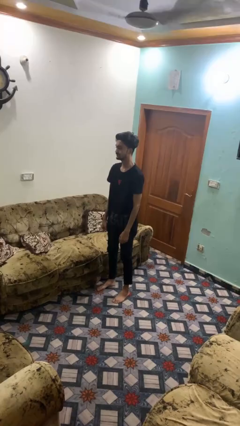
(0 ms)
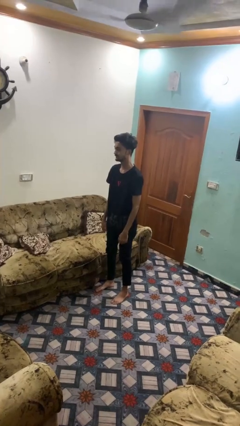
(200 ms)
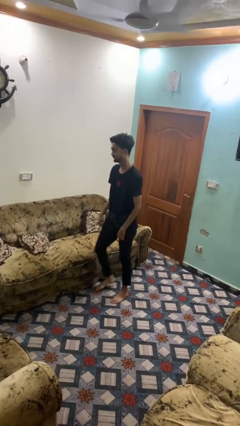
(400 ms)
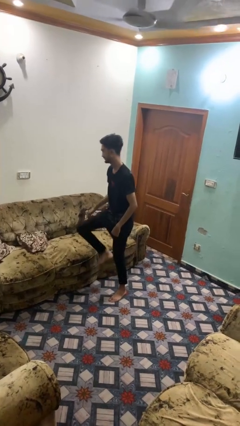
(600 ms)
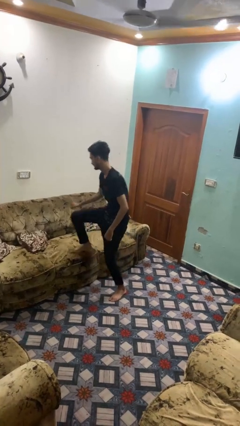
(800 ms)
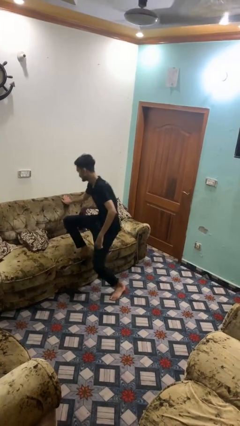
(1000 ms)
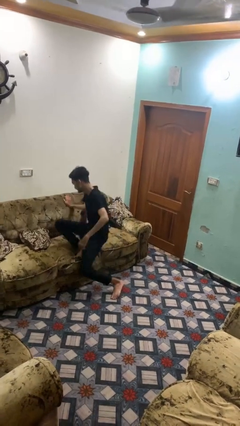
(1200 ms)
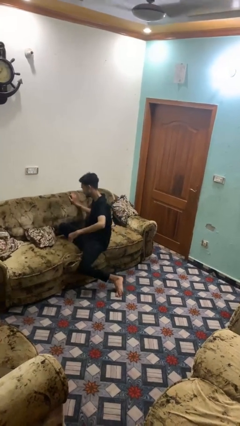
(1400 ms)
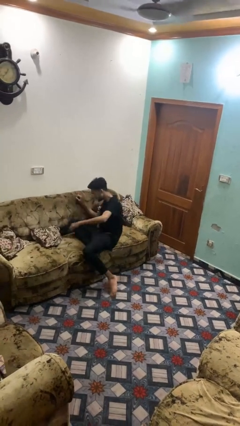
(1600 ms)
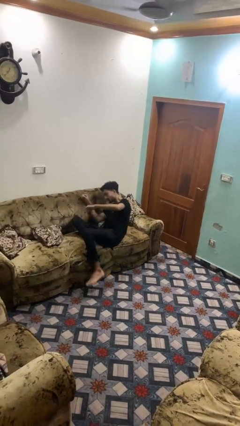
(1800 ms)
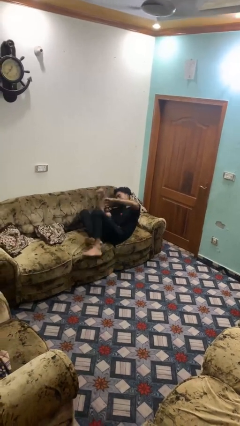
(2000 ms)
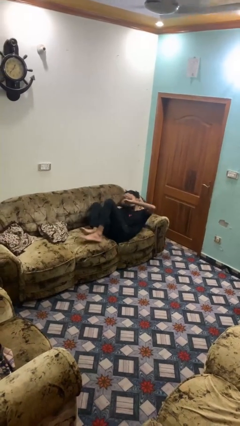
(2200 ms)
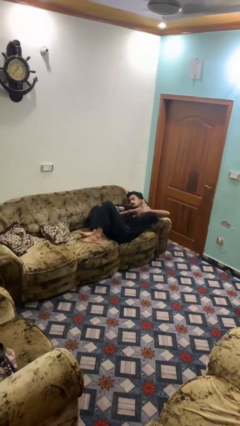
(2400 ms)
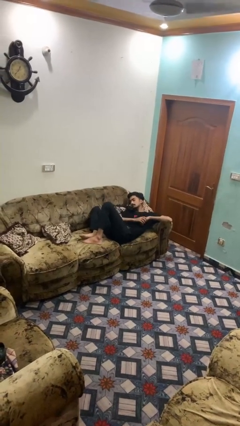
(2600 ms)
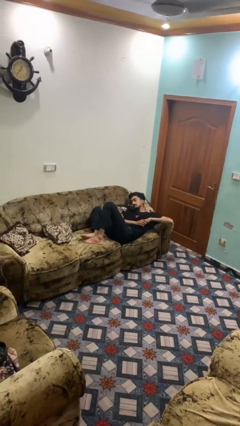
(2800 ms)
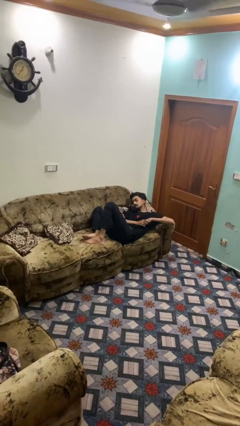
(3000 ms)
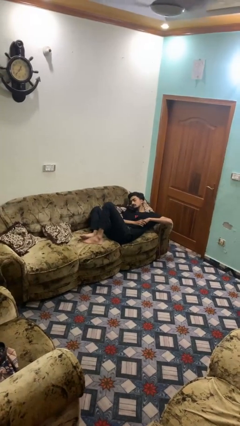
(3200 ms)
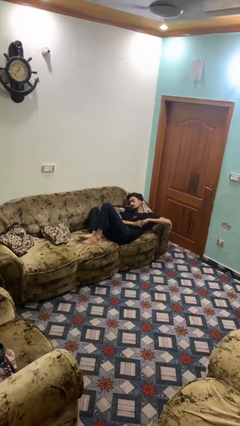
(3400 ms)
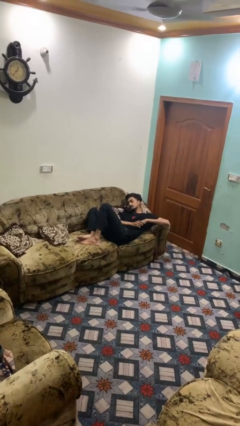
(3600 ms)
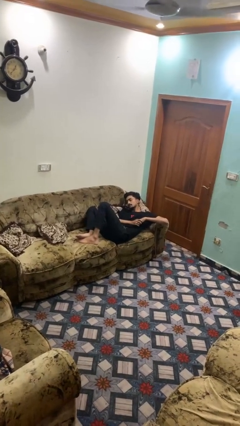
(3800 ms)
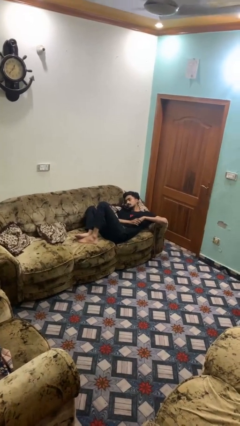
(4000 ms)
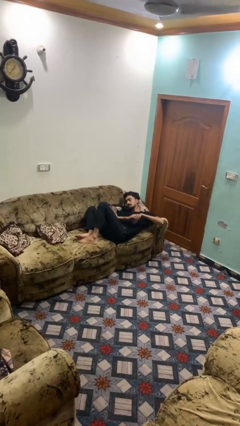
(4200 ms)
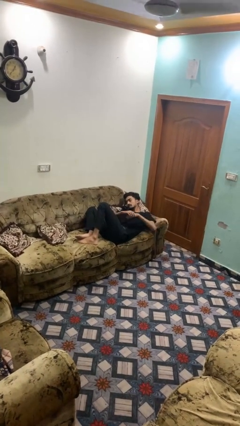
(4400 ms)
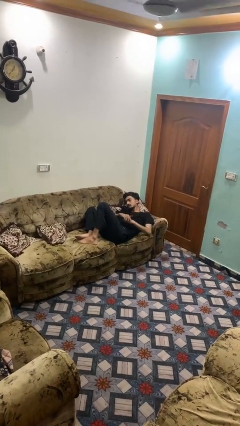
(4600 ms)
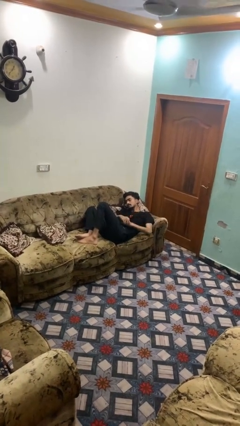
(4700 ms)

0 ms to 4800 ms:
person lies down on couch

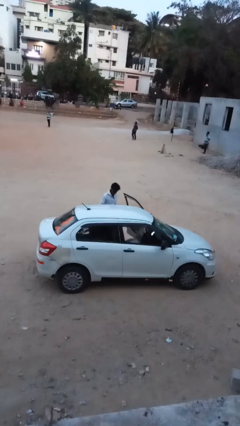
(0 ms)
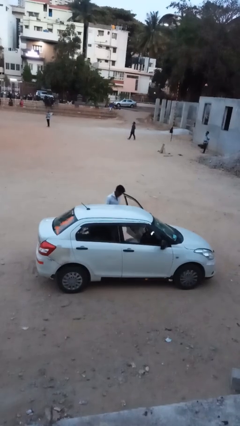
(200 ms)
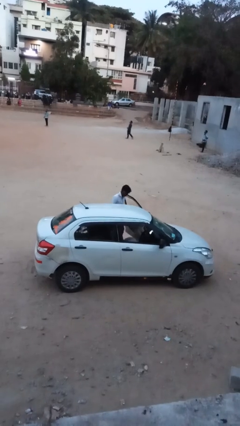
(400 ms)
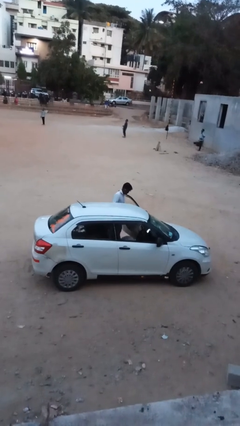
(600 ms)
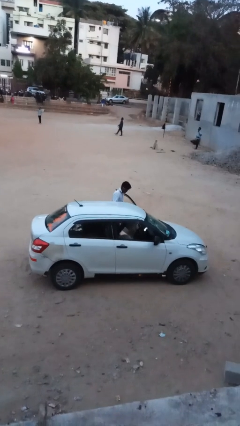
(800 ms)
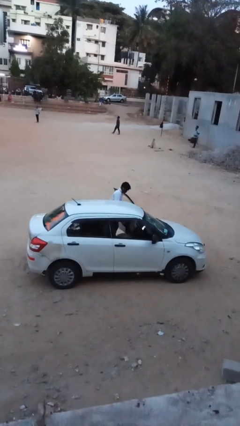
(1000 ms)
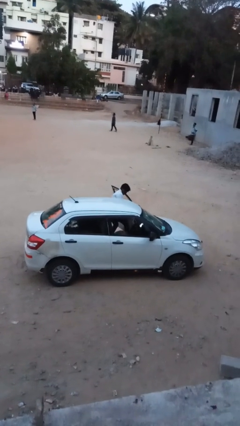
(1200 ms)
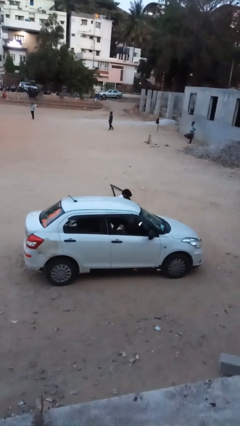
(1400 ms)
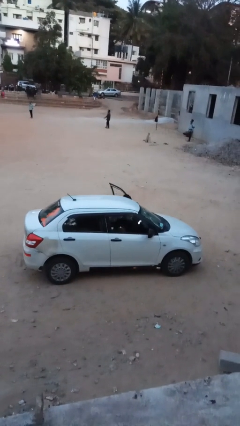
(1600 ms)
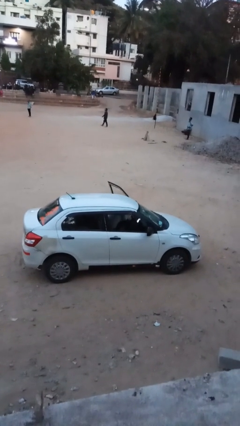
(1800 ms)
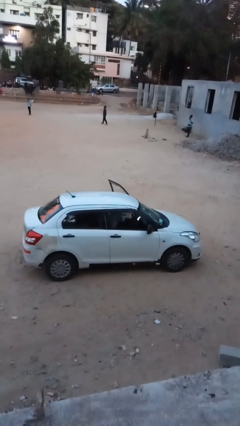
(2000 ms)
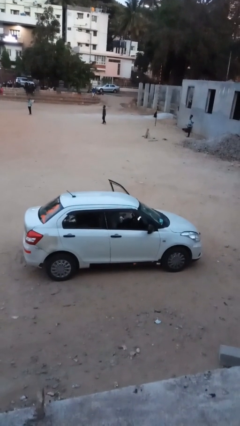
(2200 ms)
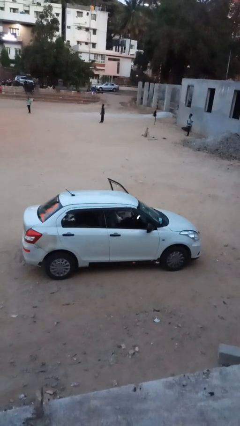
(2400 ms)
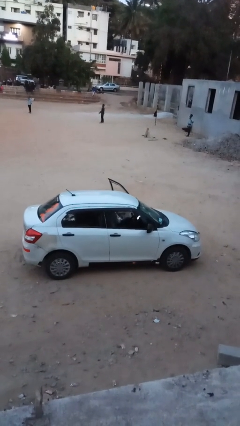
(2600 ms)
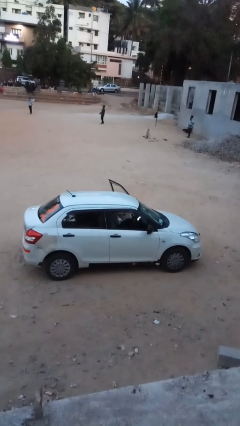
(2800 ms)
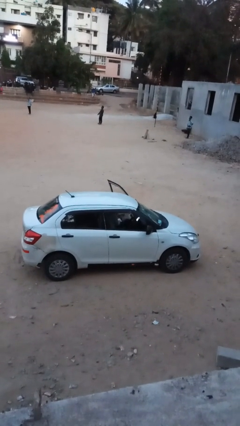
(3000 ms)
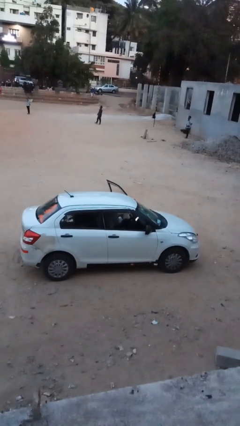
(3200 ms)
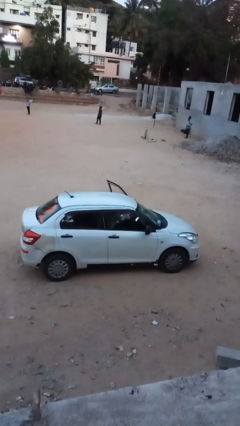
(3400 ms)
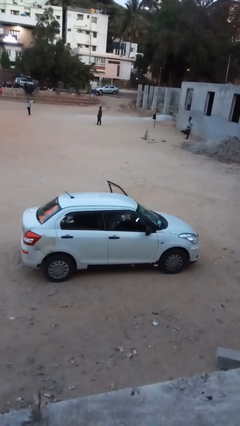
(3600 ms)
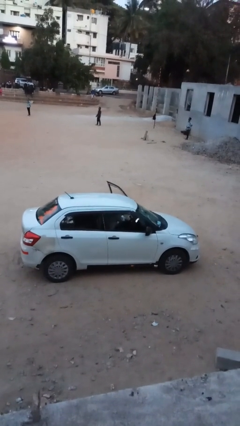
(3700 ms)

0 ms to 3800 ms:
person enters car

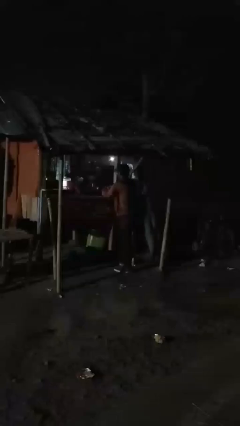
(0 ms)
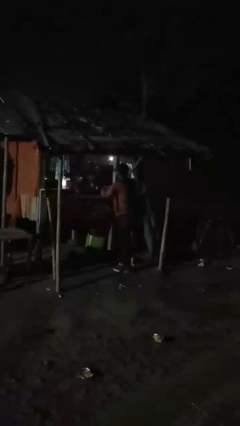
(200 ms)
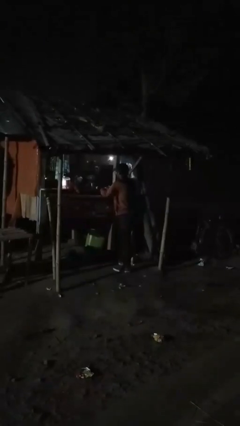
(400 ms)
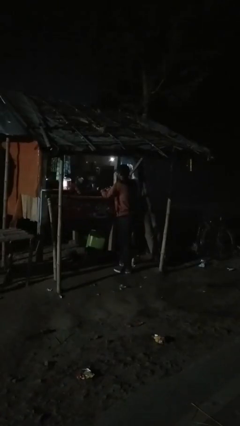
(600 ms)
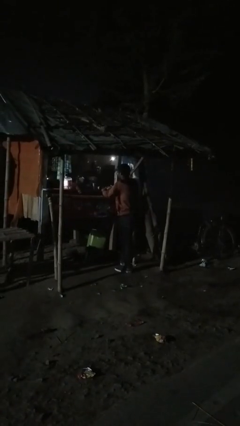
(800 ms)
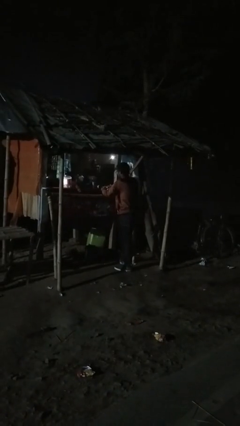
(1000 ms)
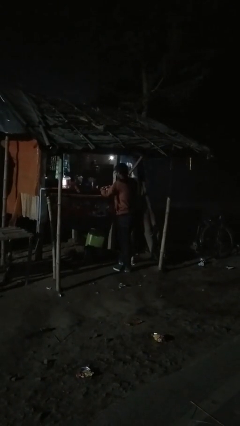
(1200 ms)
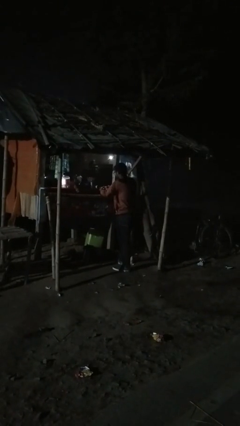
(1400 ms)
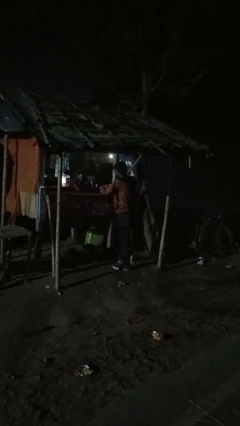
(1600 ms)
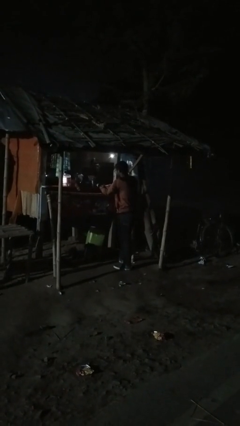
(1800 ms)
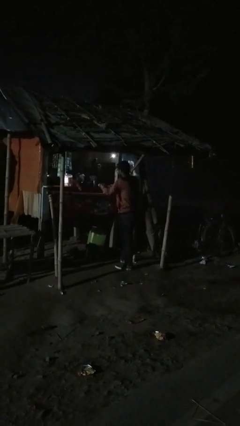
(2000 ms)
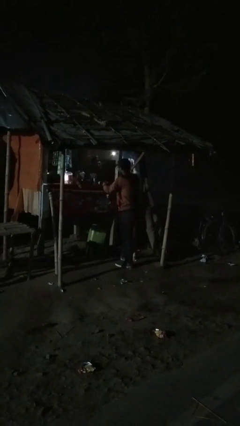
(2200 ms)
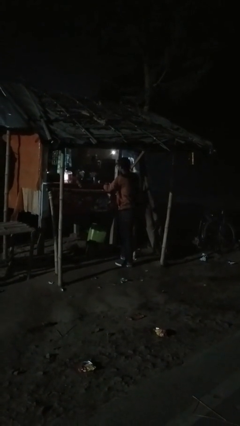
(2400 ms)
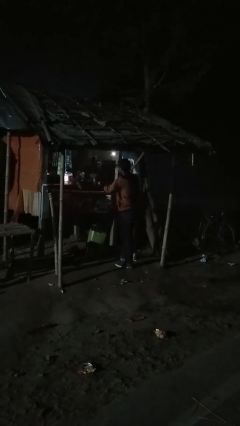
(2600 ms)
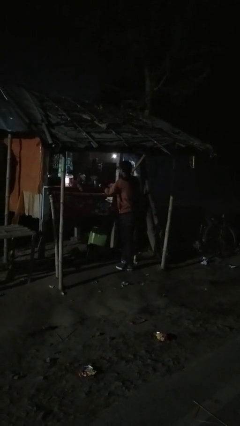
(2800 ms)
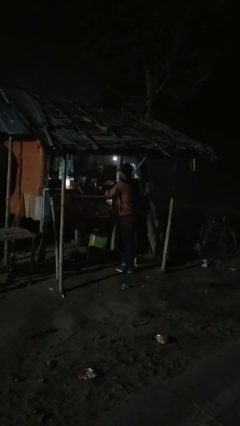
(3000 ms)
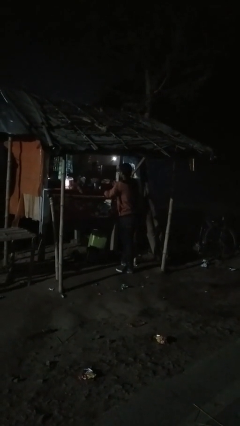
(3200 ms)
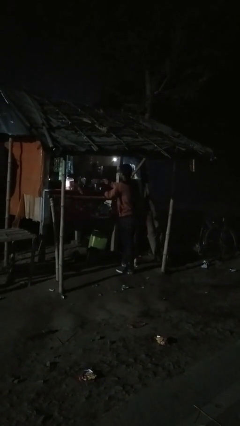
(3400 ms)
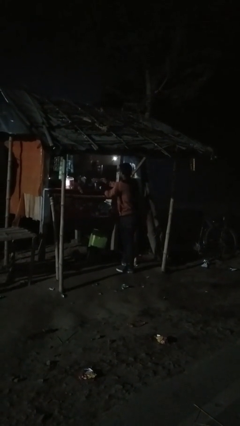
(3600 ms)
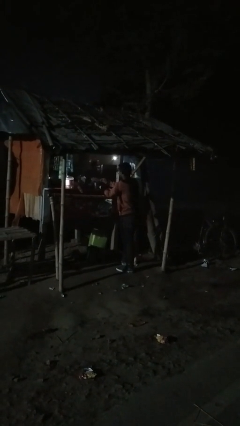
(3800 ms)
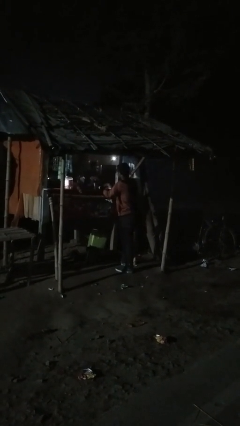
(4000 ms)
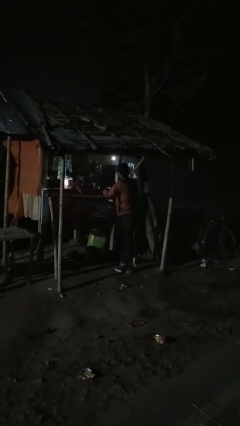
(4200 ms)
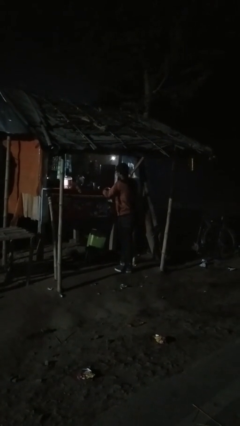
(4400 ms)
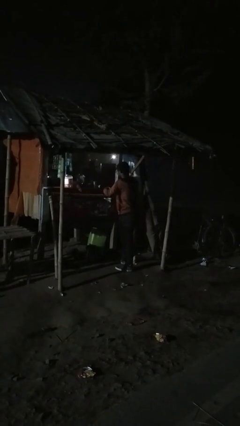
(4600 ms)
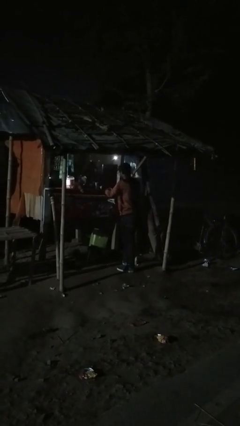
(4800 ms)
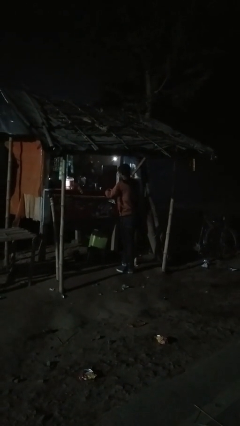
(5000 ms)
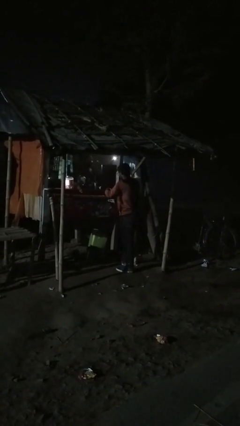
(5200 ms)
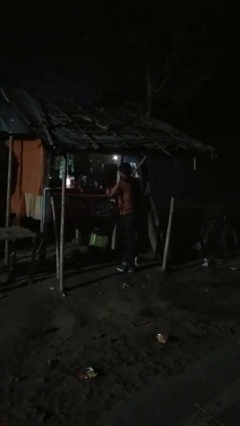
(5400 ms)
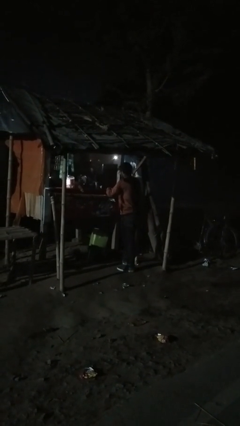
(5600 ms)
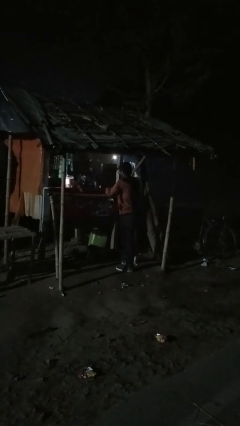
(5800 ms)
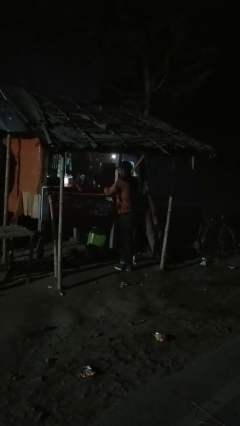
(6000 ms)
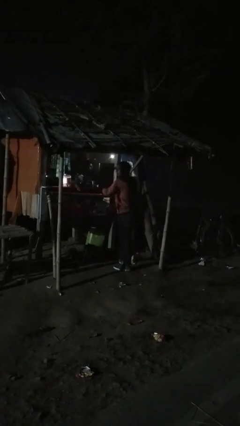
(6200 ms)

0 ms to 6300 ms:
person purchases from machine

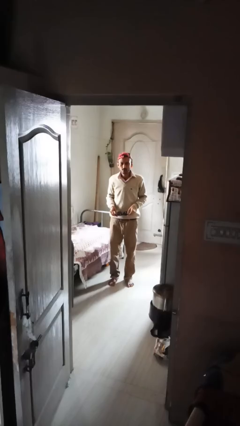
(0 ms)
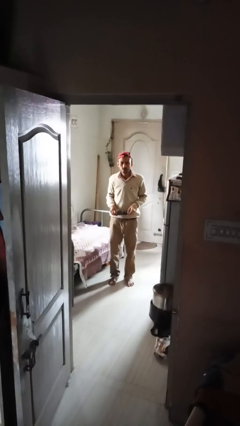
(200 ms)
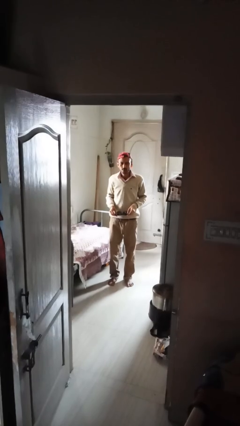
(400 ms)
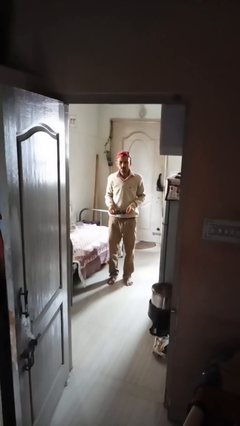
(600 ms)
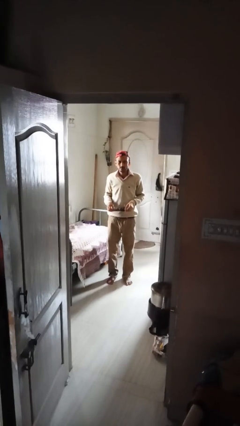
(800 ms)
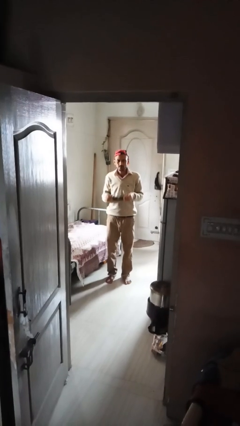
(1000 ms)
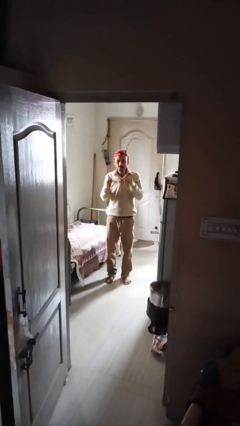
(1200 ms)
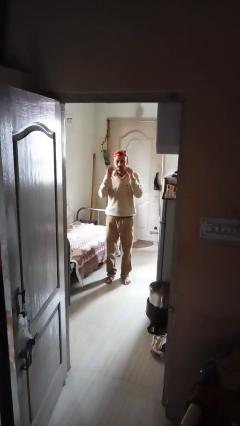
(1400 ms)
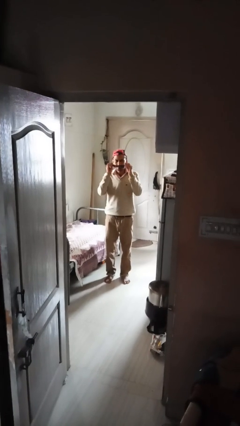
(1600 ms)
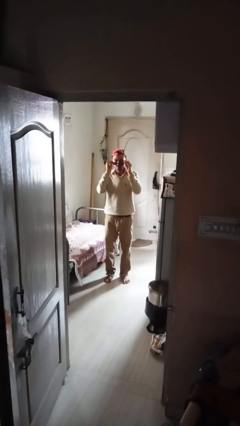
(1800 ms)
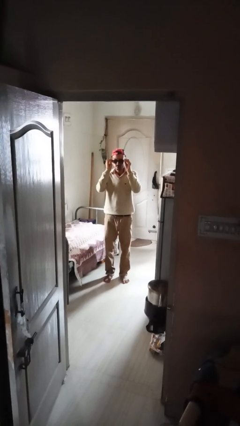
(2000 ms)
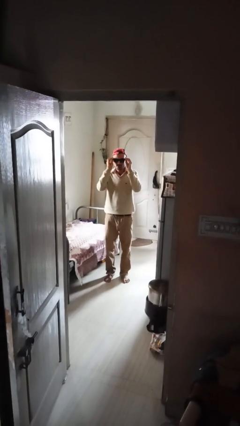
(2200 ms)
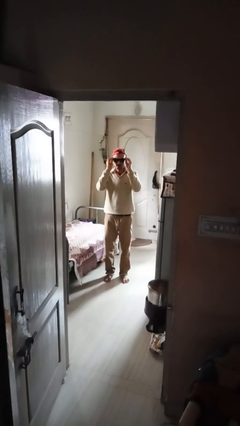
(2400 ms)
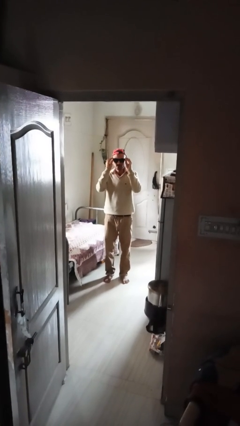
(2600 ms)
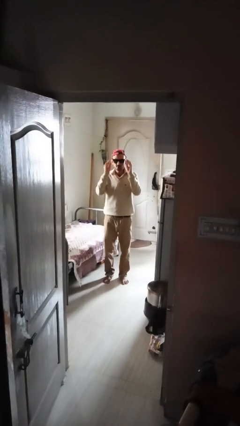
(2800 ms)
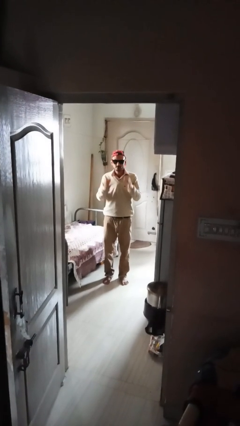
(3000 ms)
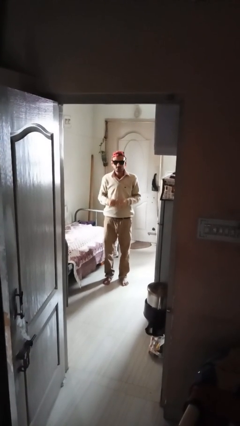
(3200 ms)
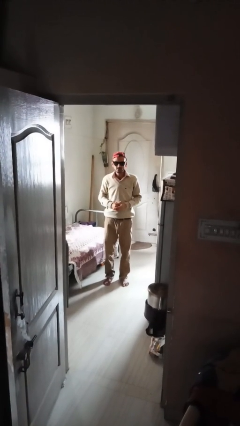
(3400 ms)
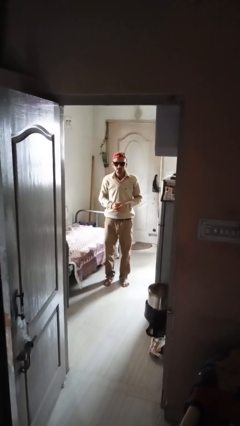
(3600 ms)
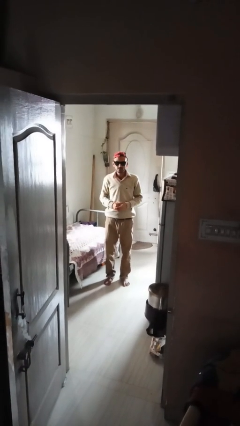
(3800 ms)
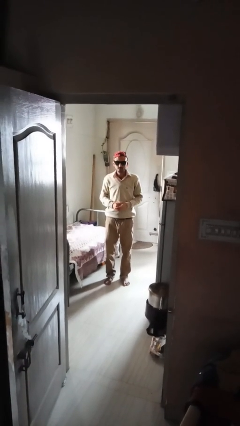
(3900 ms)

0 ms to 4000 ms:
person puts on sunglasses
